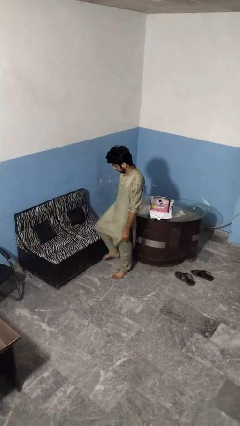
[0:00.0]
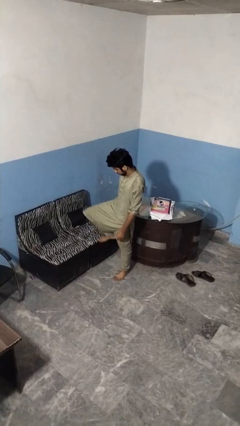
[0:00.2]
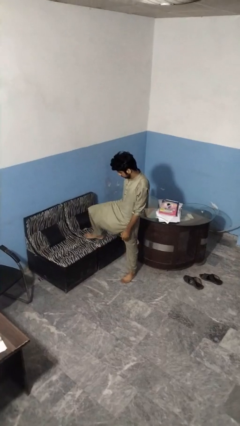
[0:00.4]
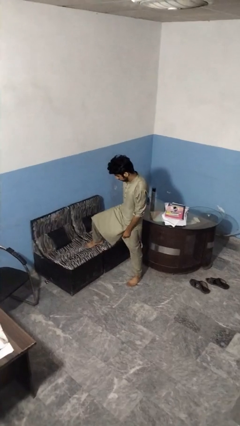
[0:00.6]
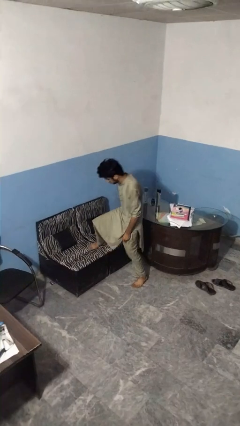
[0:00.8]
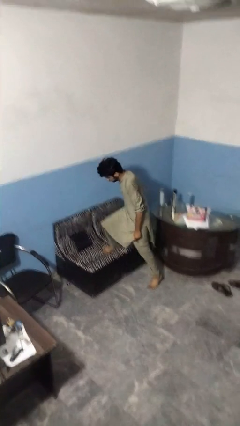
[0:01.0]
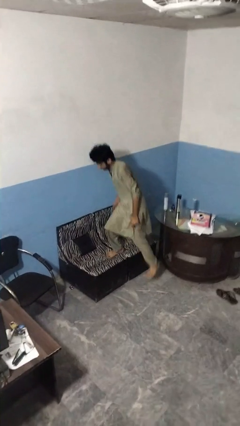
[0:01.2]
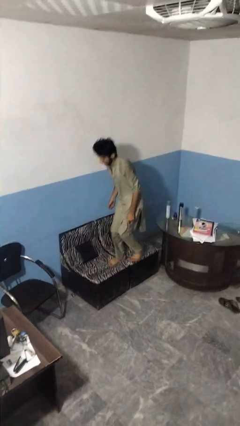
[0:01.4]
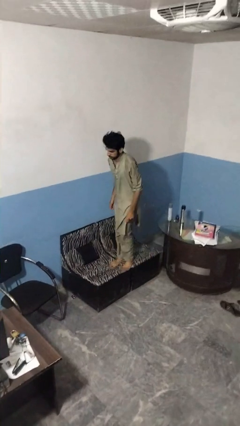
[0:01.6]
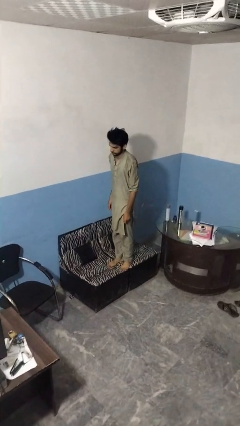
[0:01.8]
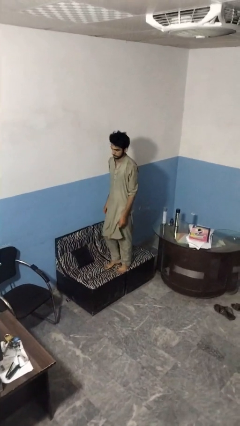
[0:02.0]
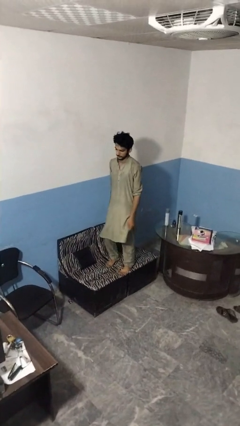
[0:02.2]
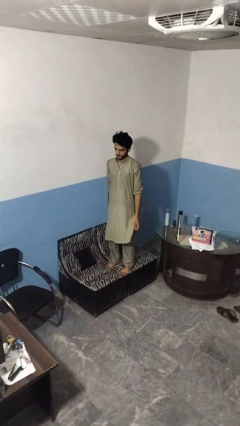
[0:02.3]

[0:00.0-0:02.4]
person climbs on couch

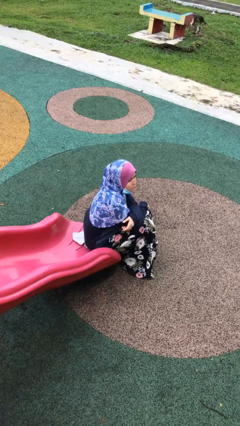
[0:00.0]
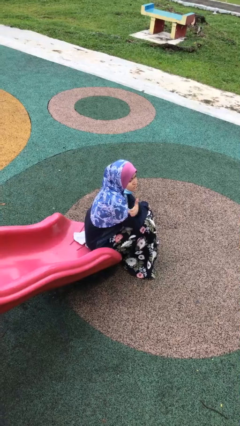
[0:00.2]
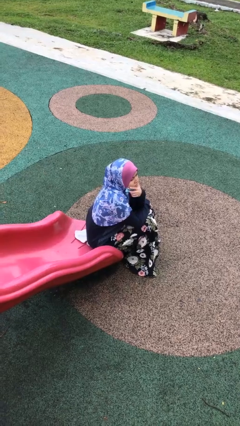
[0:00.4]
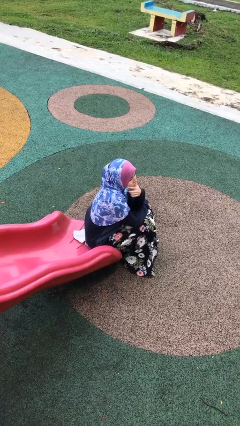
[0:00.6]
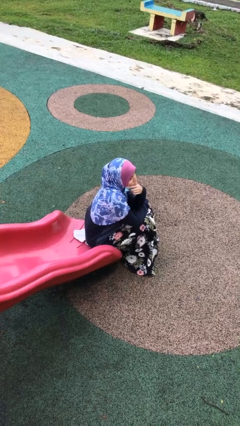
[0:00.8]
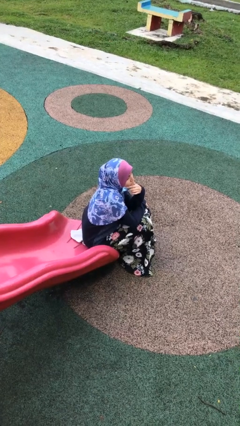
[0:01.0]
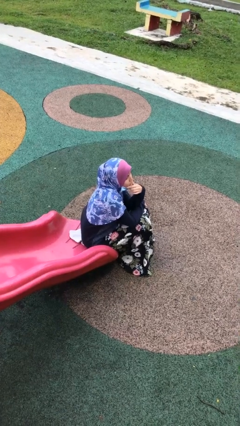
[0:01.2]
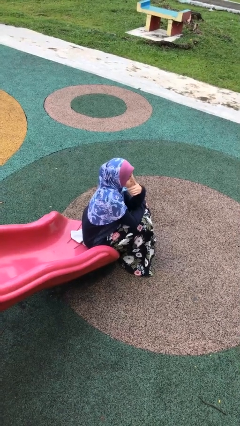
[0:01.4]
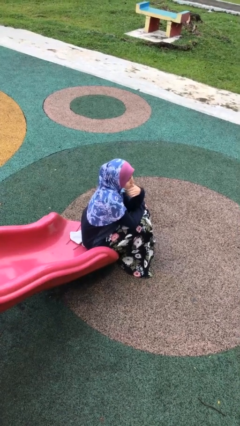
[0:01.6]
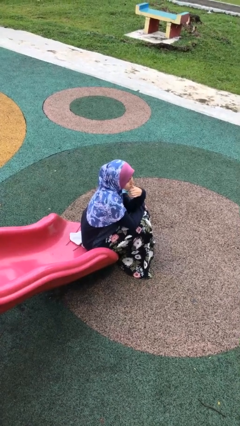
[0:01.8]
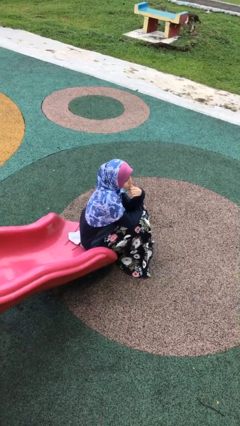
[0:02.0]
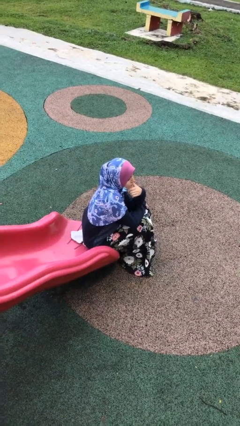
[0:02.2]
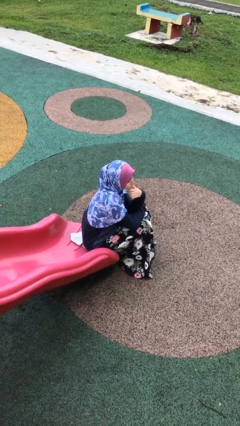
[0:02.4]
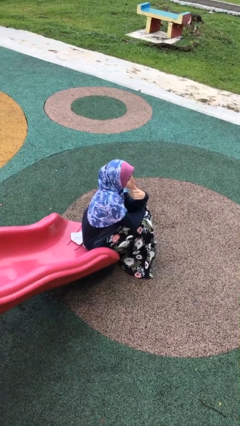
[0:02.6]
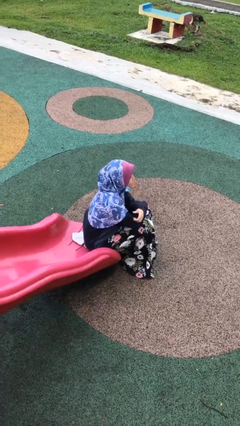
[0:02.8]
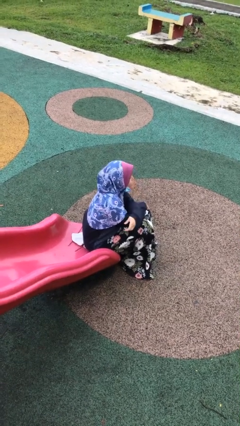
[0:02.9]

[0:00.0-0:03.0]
person strokes chin

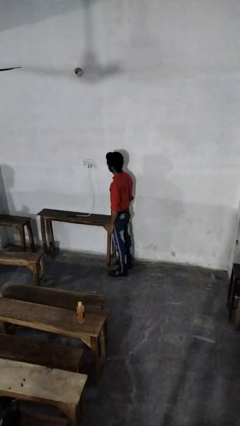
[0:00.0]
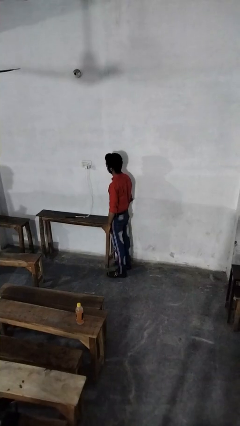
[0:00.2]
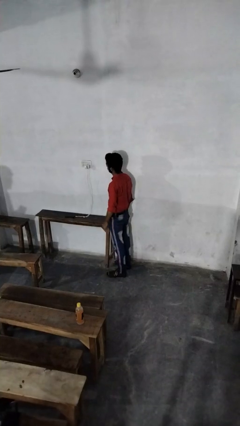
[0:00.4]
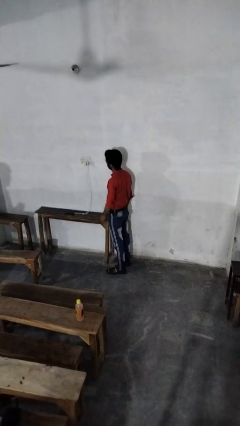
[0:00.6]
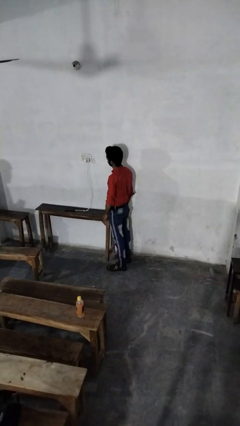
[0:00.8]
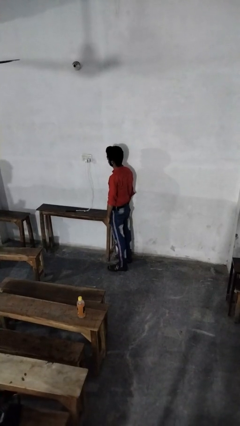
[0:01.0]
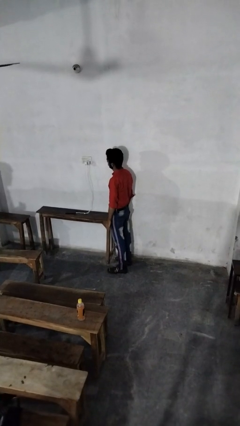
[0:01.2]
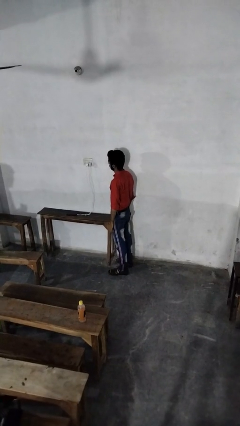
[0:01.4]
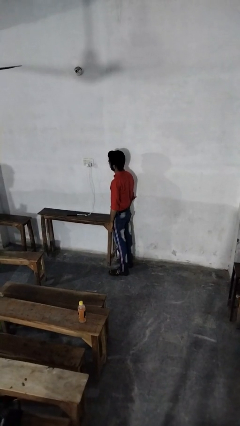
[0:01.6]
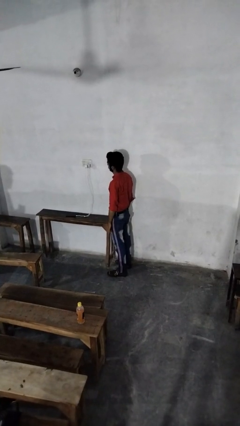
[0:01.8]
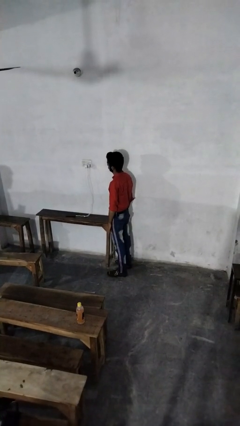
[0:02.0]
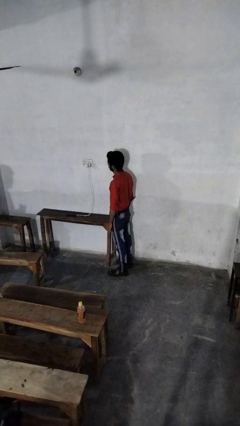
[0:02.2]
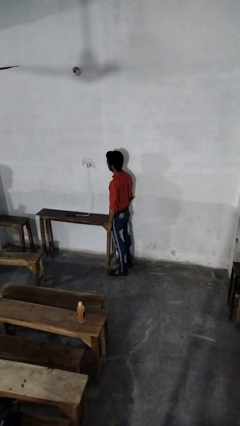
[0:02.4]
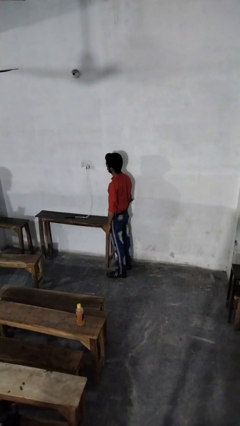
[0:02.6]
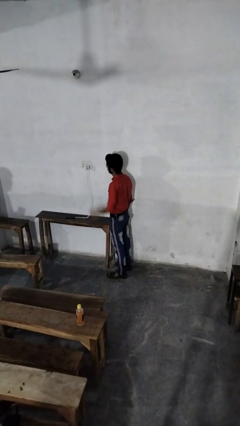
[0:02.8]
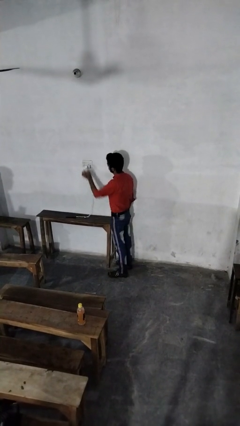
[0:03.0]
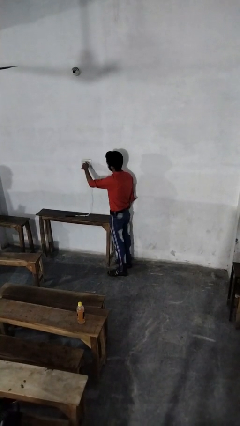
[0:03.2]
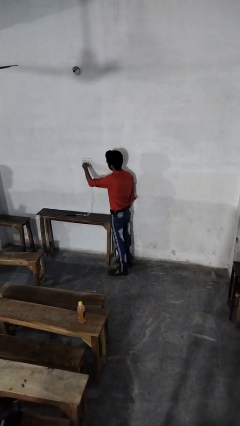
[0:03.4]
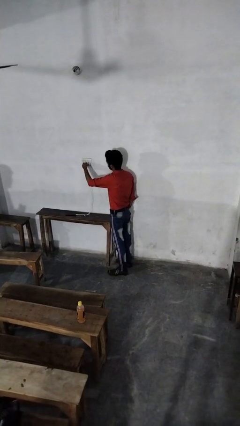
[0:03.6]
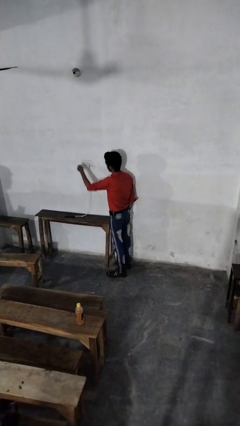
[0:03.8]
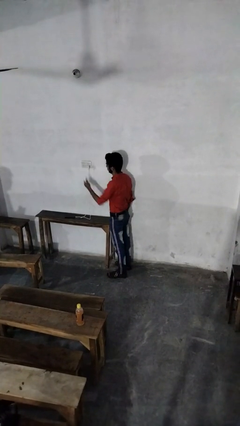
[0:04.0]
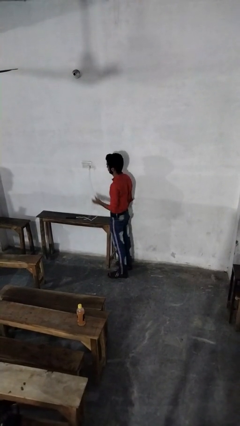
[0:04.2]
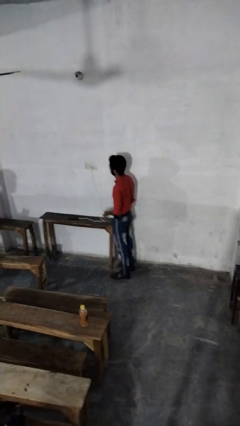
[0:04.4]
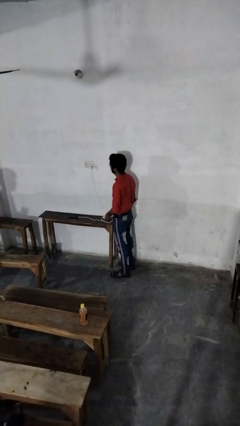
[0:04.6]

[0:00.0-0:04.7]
person unplugs from electrical socket

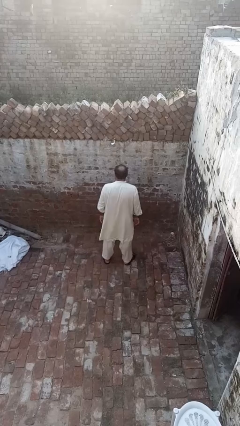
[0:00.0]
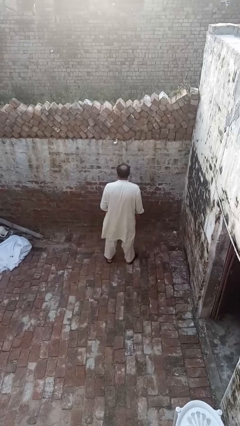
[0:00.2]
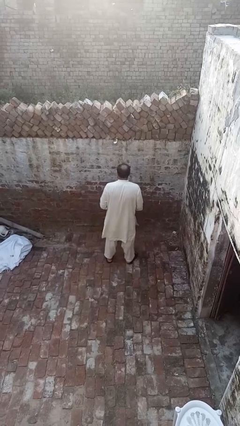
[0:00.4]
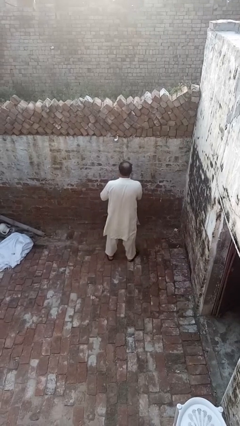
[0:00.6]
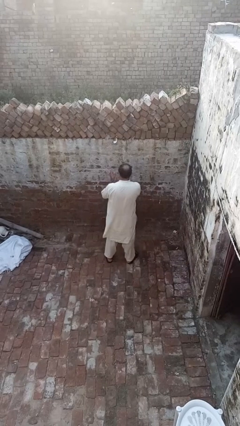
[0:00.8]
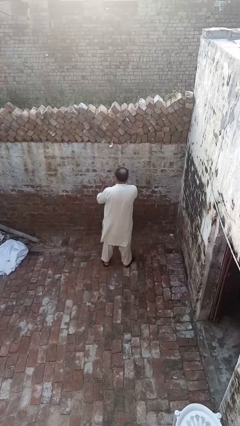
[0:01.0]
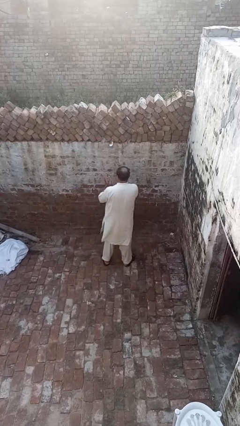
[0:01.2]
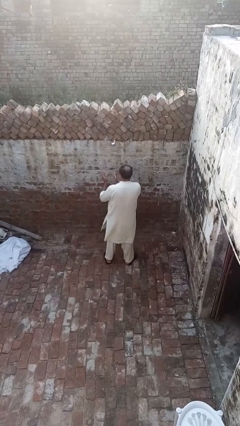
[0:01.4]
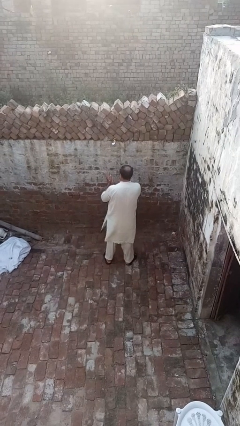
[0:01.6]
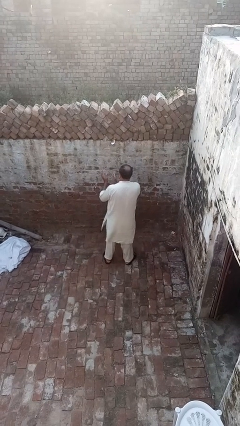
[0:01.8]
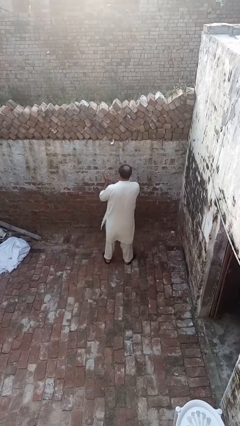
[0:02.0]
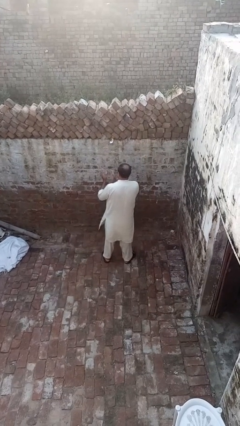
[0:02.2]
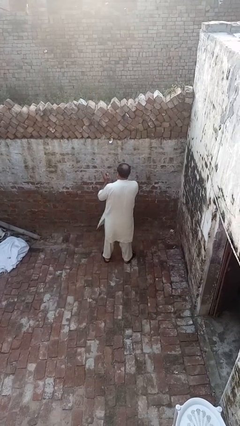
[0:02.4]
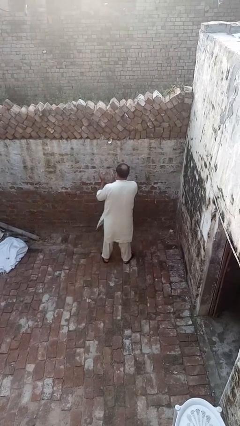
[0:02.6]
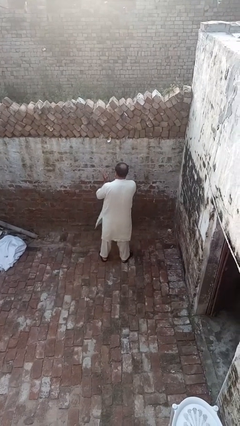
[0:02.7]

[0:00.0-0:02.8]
person claps hands

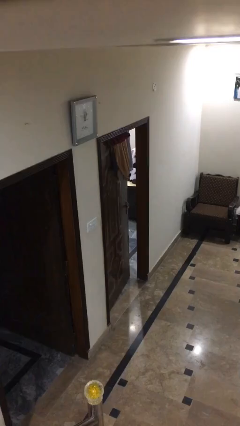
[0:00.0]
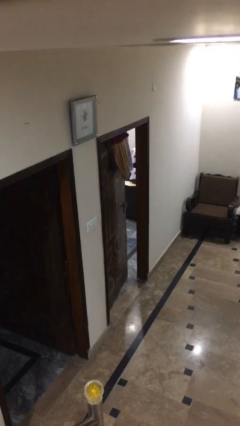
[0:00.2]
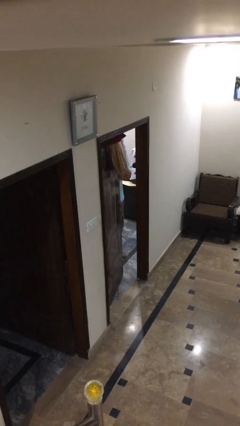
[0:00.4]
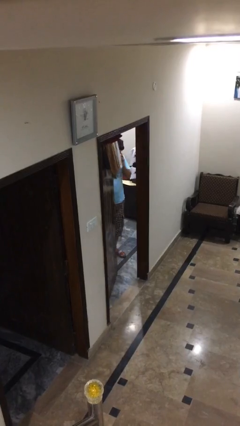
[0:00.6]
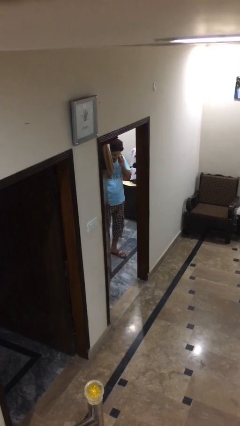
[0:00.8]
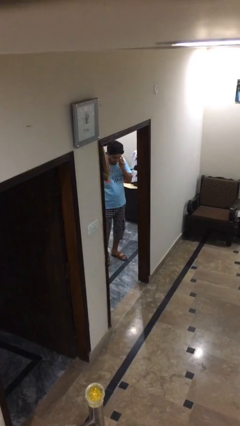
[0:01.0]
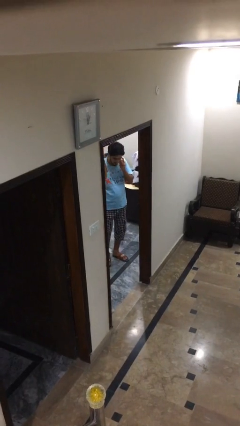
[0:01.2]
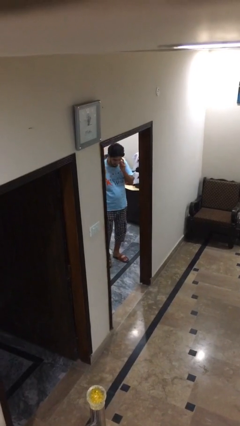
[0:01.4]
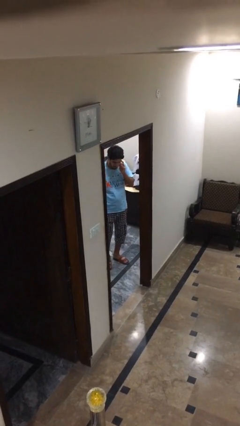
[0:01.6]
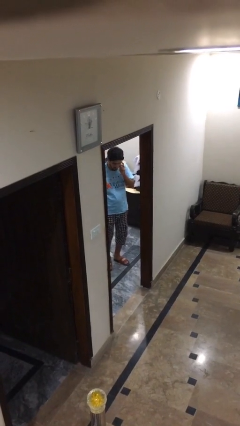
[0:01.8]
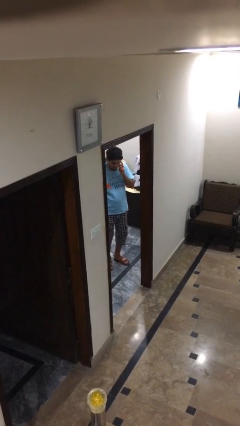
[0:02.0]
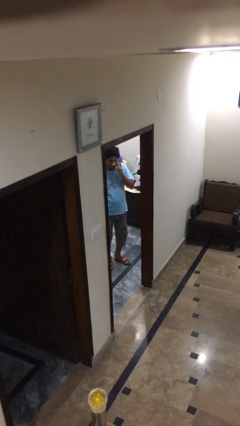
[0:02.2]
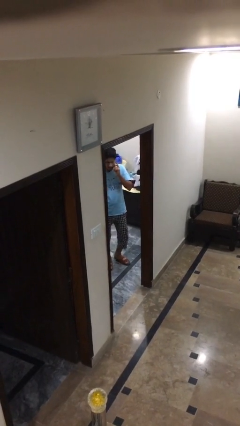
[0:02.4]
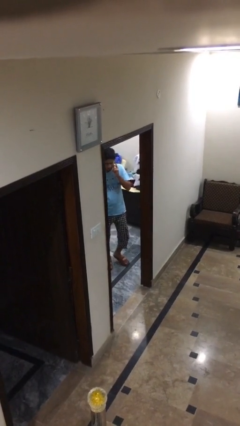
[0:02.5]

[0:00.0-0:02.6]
person opens facility door

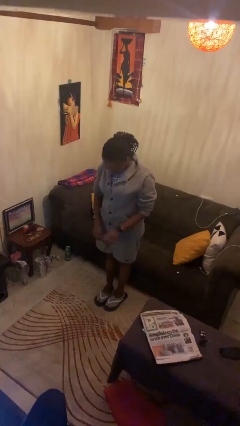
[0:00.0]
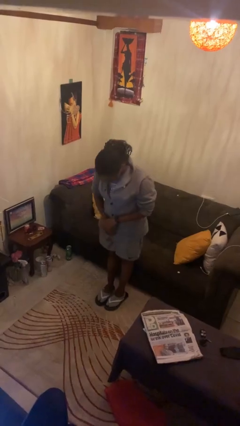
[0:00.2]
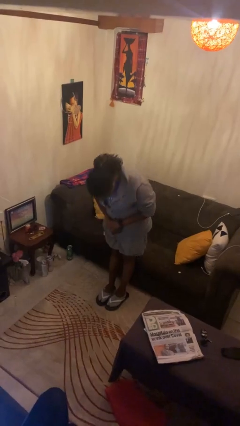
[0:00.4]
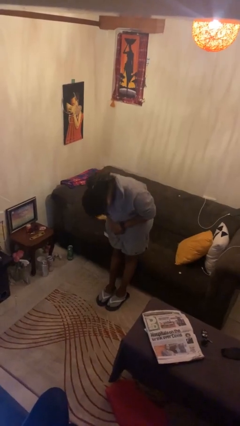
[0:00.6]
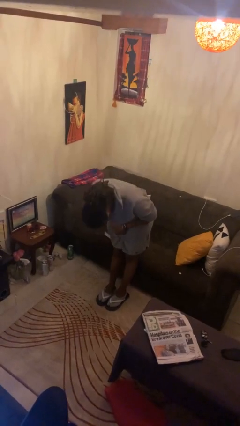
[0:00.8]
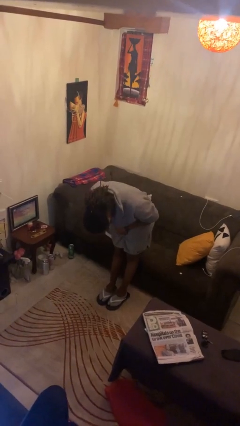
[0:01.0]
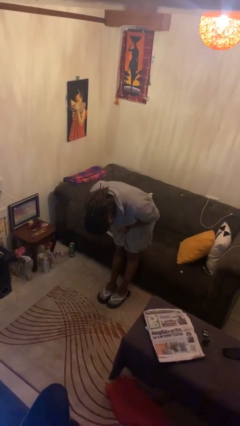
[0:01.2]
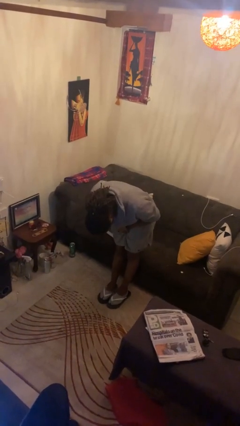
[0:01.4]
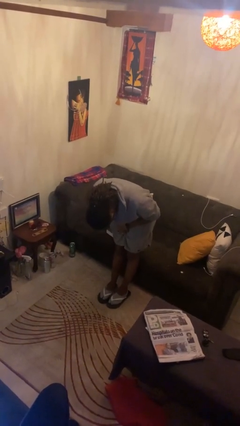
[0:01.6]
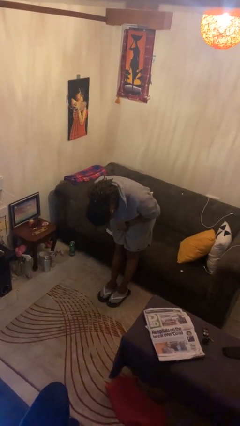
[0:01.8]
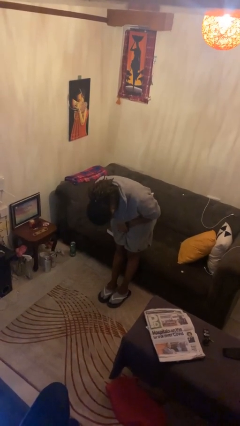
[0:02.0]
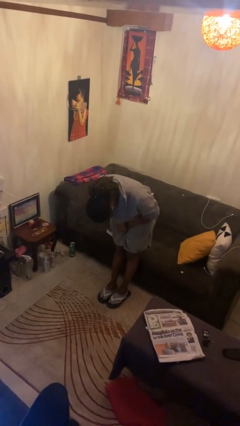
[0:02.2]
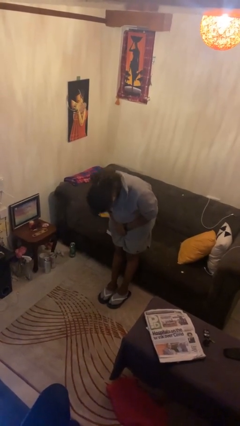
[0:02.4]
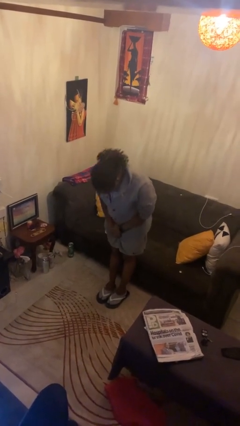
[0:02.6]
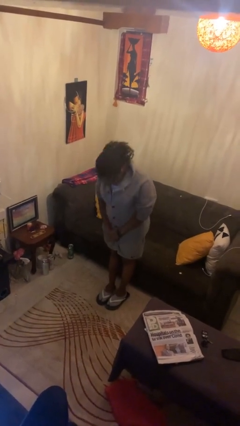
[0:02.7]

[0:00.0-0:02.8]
person bows
